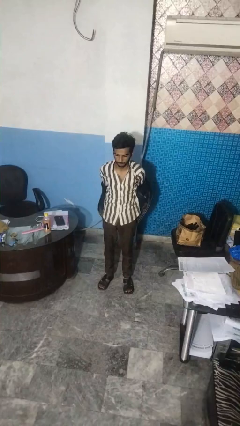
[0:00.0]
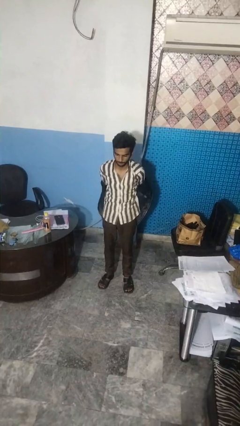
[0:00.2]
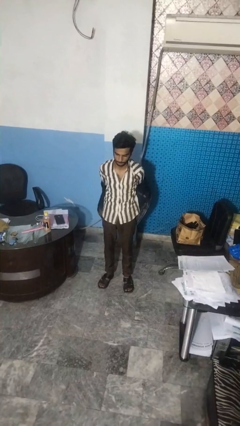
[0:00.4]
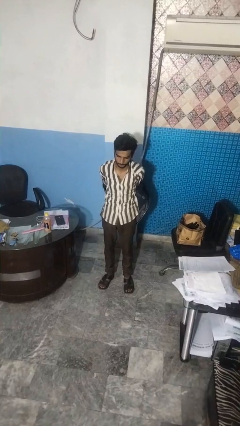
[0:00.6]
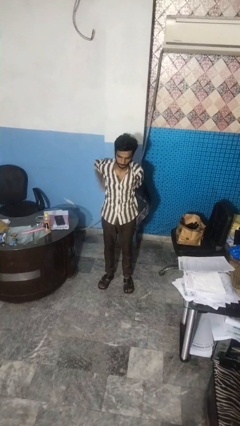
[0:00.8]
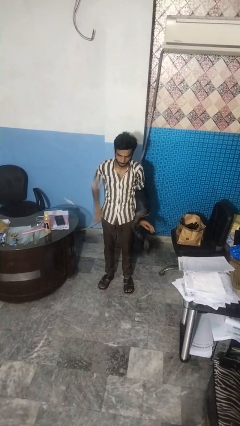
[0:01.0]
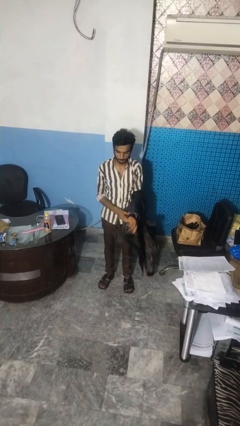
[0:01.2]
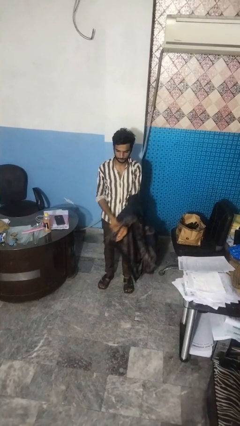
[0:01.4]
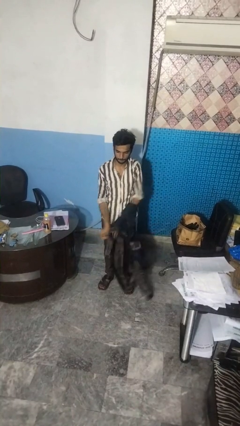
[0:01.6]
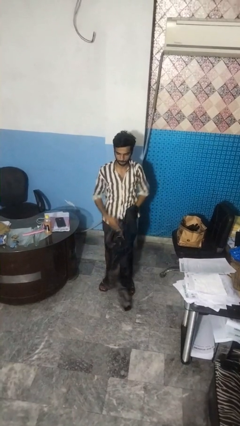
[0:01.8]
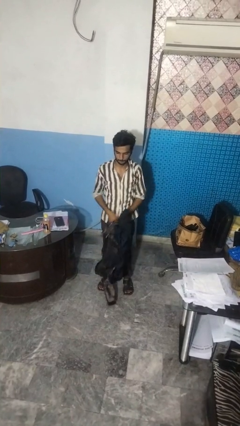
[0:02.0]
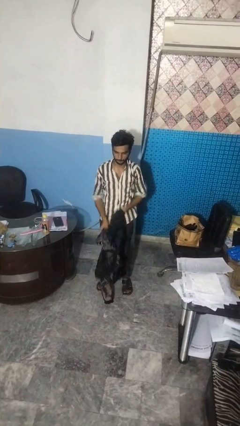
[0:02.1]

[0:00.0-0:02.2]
person takes off jacket

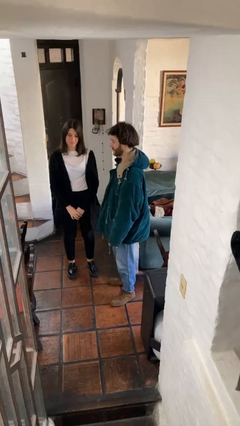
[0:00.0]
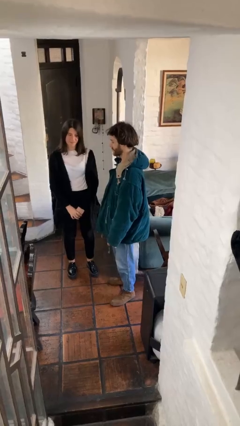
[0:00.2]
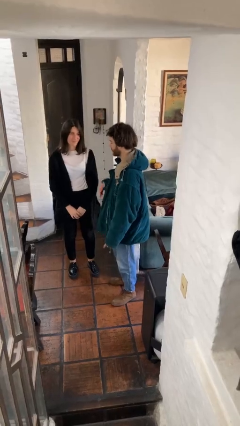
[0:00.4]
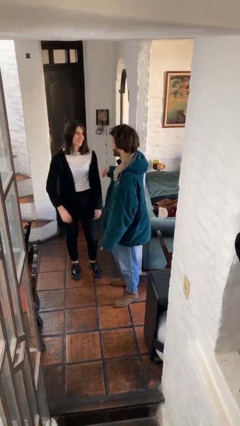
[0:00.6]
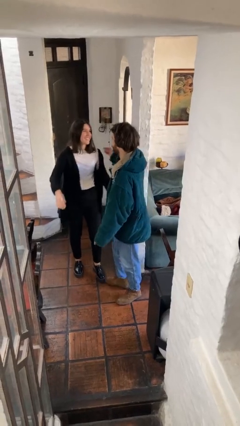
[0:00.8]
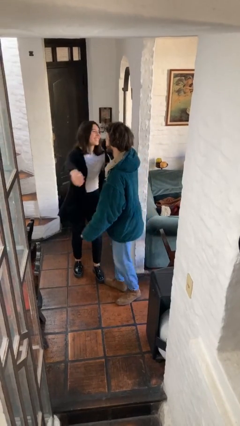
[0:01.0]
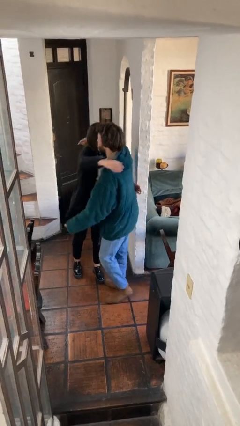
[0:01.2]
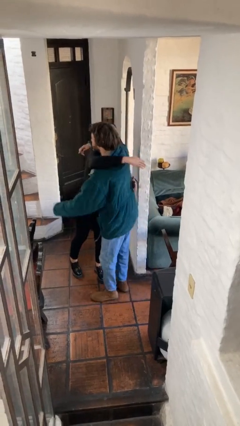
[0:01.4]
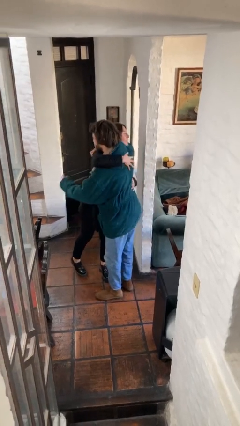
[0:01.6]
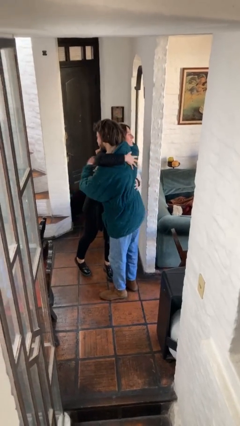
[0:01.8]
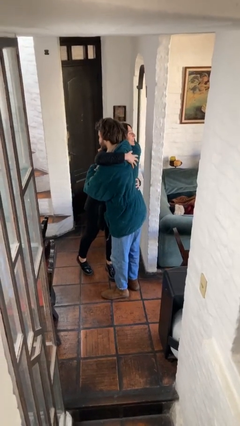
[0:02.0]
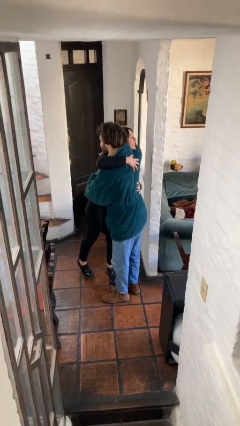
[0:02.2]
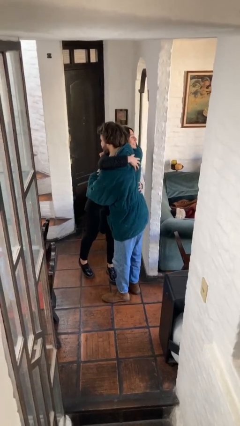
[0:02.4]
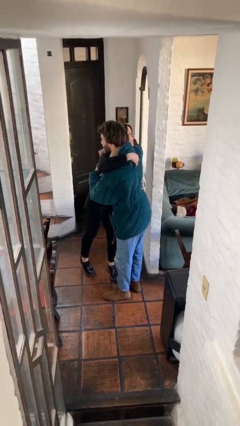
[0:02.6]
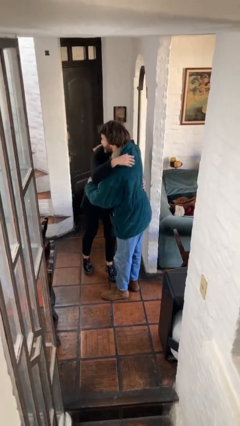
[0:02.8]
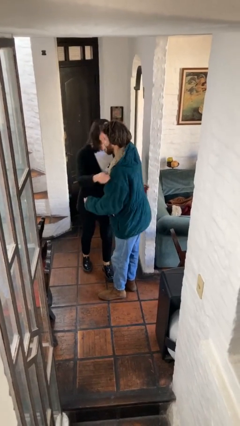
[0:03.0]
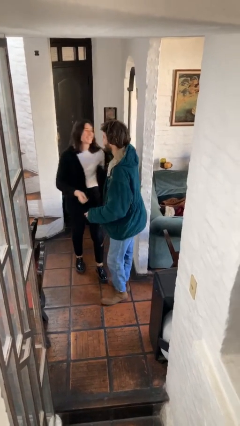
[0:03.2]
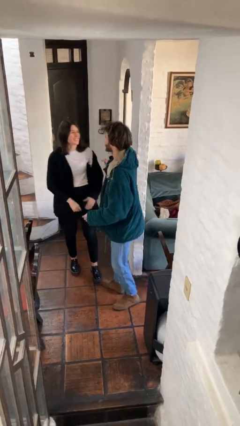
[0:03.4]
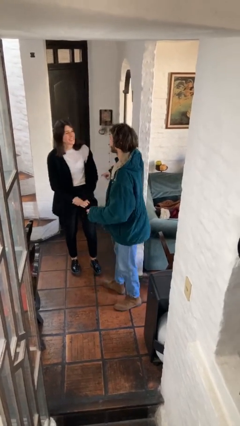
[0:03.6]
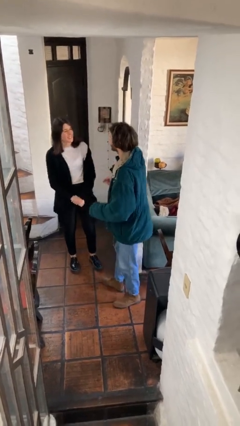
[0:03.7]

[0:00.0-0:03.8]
person embraces person

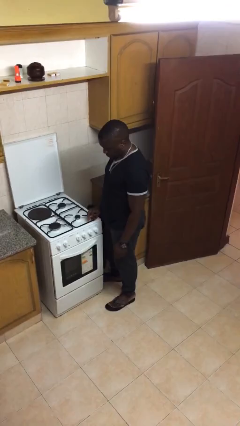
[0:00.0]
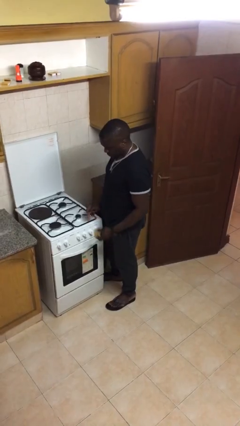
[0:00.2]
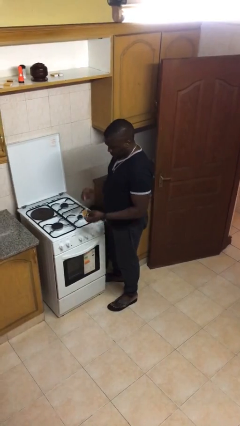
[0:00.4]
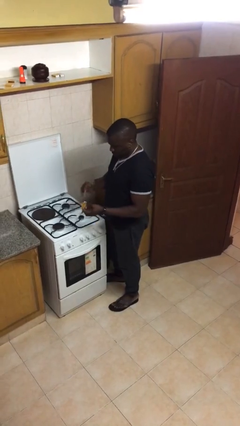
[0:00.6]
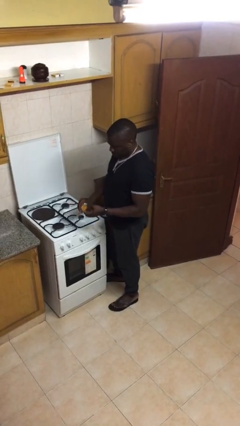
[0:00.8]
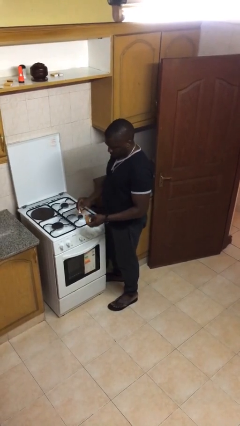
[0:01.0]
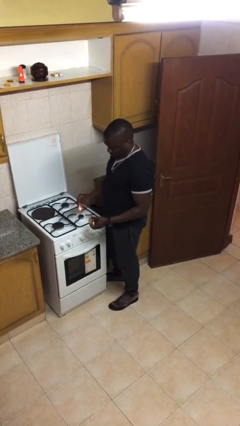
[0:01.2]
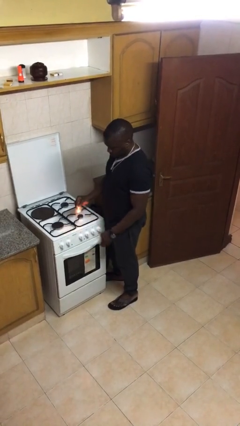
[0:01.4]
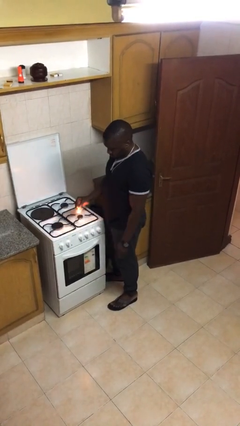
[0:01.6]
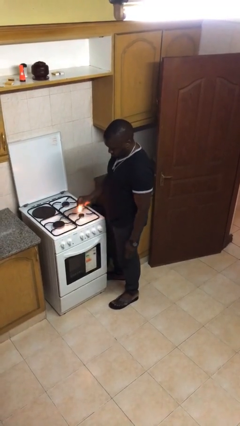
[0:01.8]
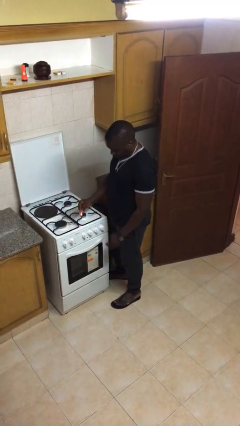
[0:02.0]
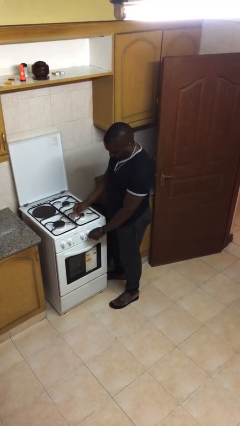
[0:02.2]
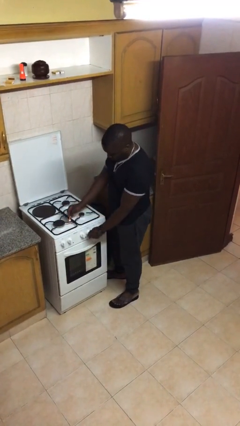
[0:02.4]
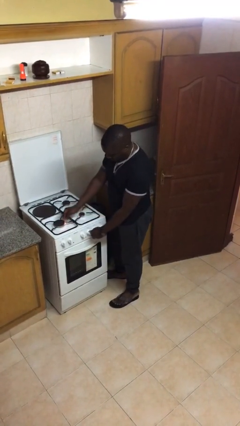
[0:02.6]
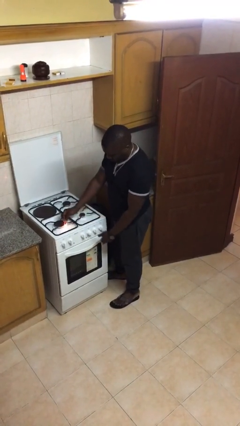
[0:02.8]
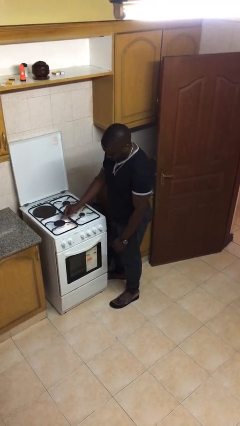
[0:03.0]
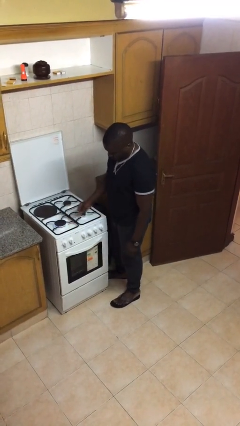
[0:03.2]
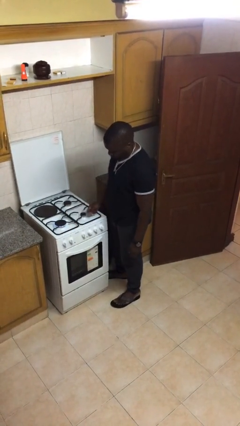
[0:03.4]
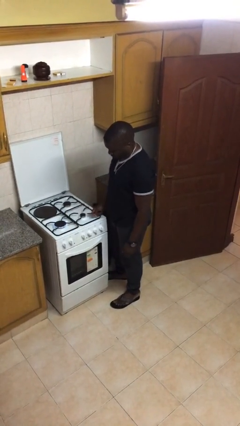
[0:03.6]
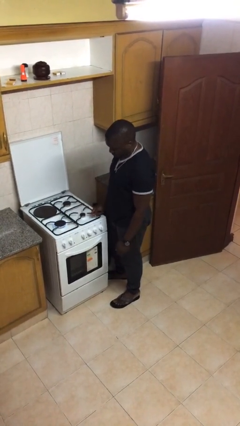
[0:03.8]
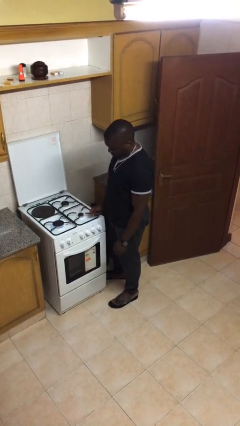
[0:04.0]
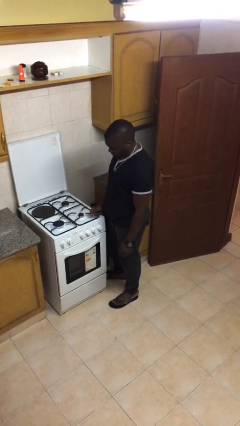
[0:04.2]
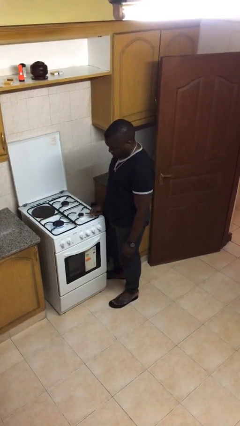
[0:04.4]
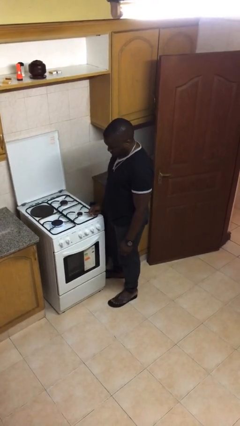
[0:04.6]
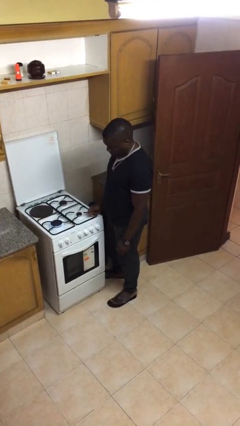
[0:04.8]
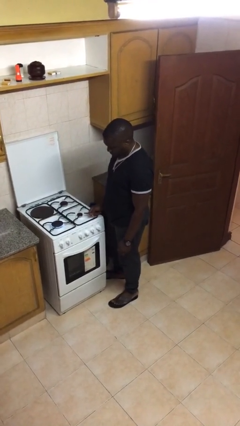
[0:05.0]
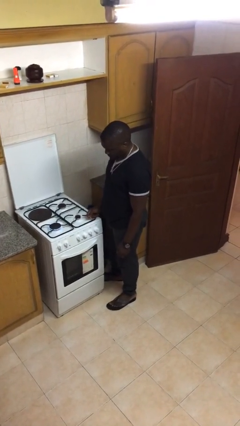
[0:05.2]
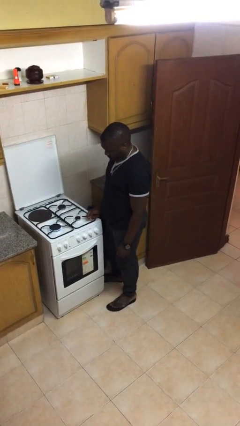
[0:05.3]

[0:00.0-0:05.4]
person turns on stovetop

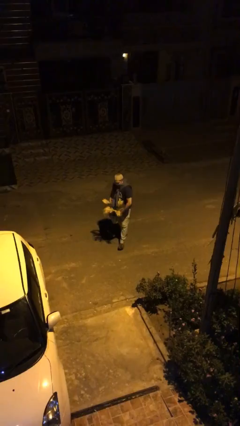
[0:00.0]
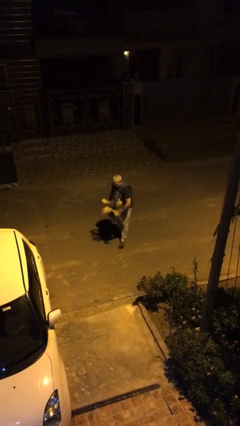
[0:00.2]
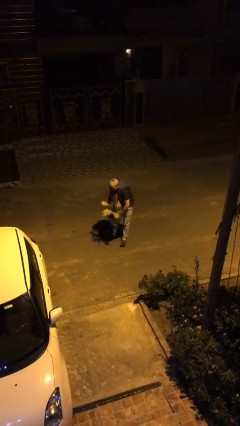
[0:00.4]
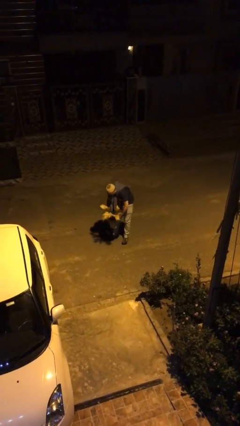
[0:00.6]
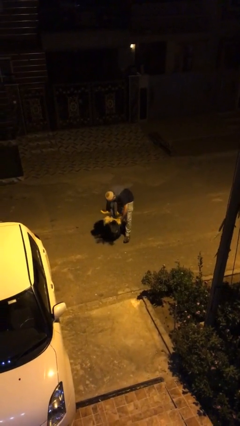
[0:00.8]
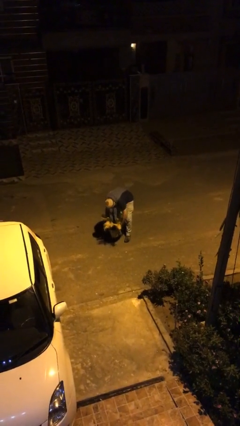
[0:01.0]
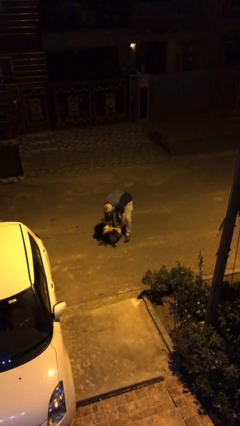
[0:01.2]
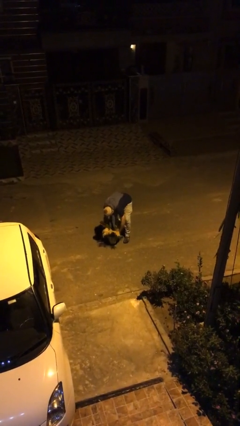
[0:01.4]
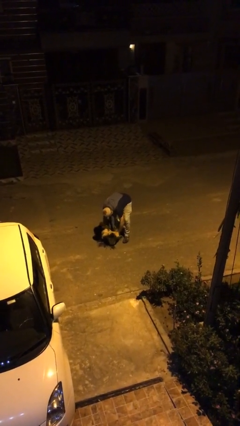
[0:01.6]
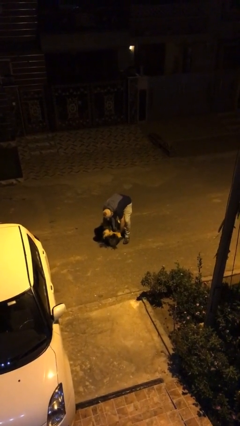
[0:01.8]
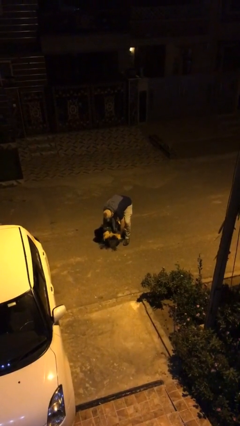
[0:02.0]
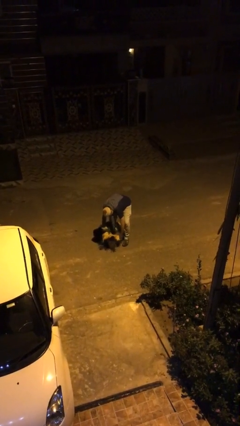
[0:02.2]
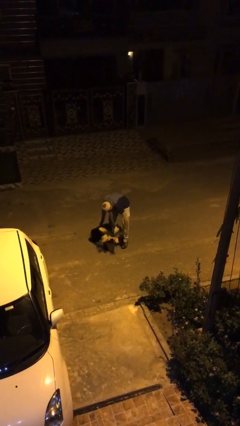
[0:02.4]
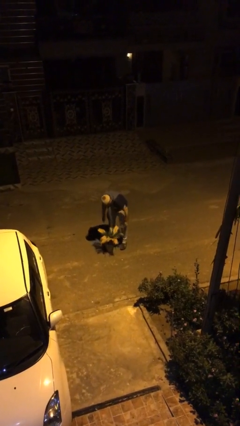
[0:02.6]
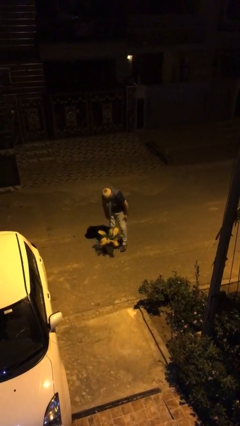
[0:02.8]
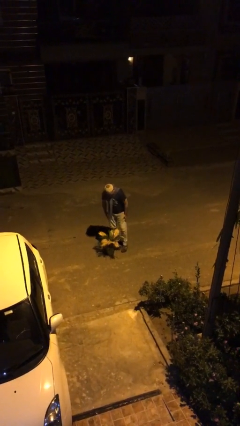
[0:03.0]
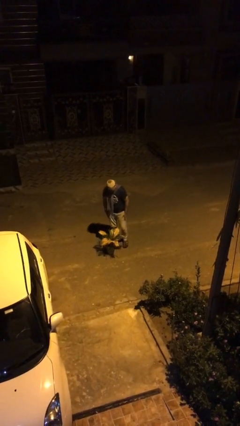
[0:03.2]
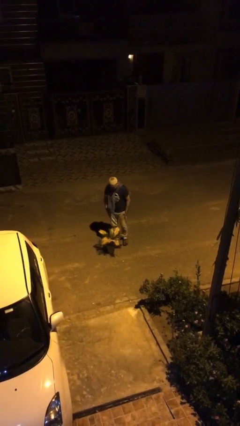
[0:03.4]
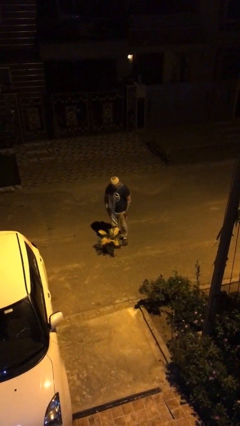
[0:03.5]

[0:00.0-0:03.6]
person puts down object on floor

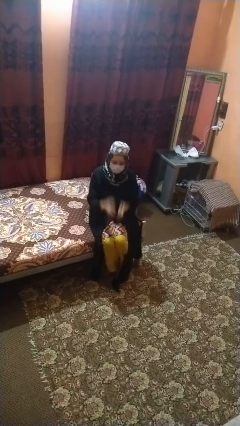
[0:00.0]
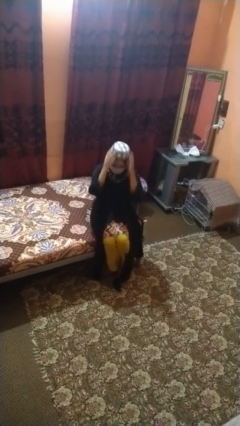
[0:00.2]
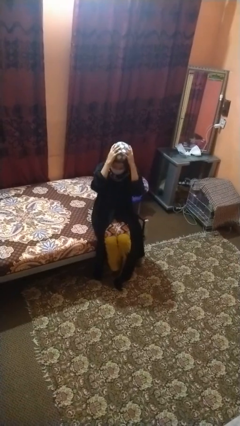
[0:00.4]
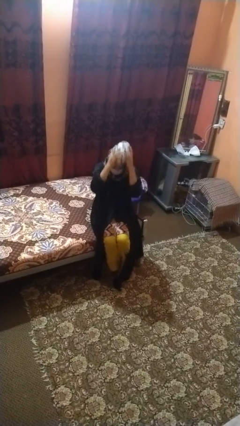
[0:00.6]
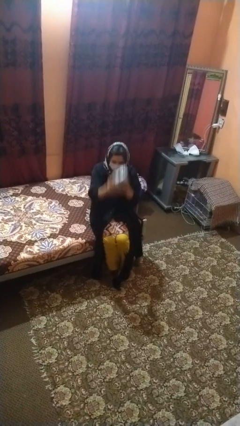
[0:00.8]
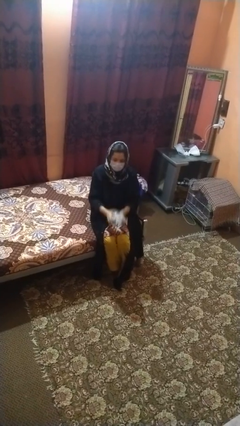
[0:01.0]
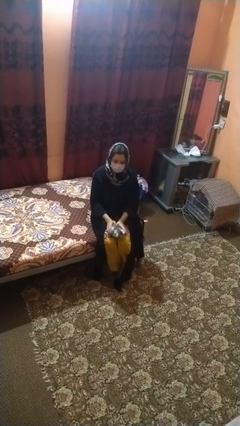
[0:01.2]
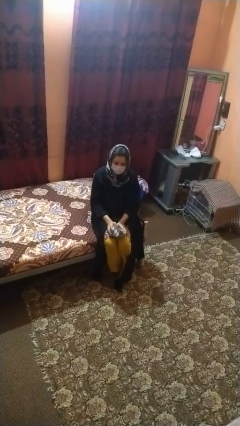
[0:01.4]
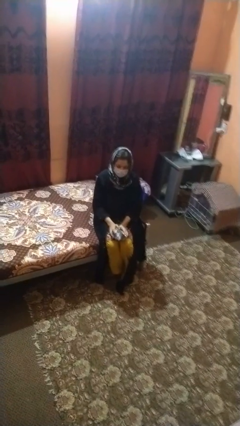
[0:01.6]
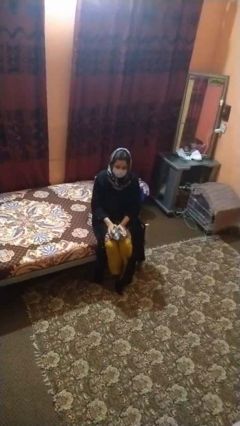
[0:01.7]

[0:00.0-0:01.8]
person takes off hat

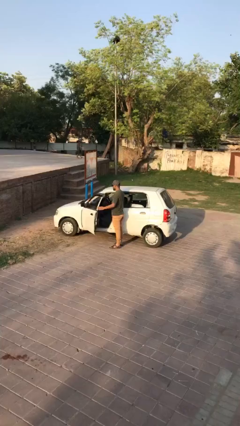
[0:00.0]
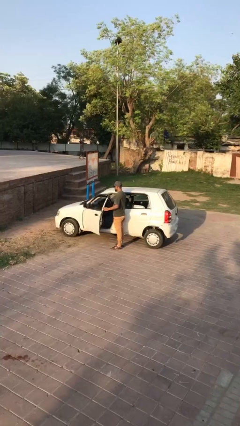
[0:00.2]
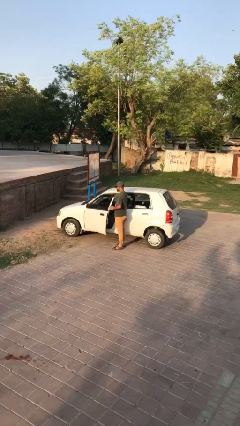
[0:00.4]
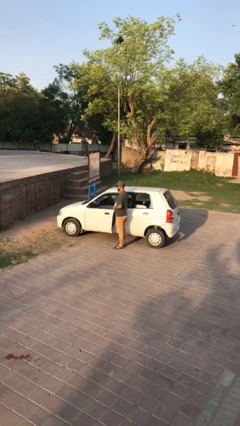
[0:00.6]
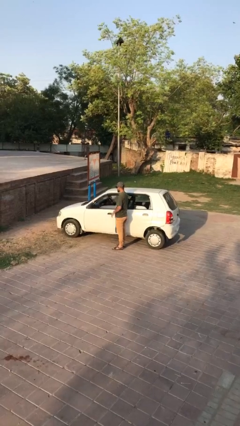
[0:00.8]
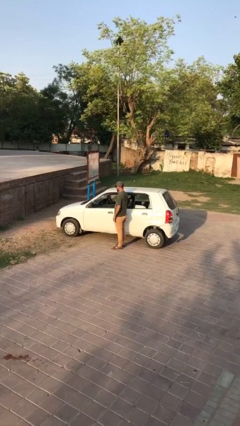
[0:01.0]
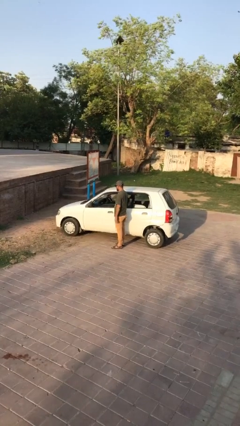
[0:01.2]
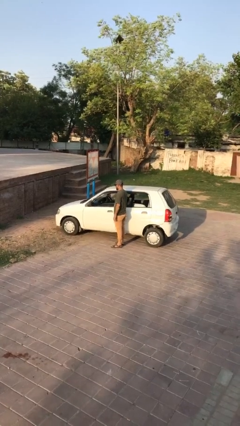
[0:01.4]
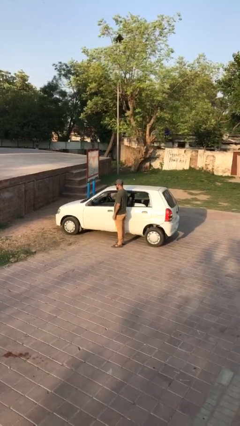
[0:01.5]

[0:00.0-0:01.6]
person closes car door
